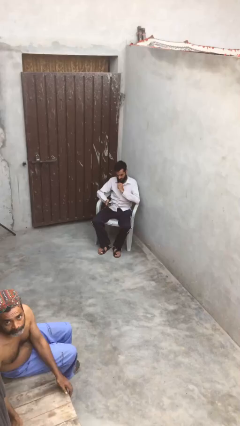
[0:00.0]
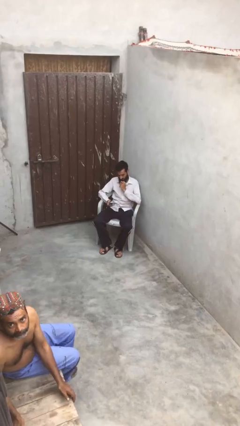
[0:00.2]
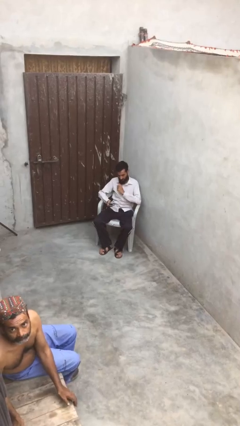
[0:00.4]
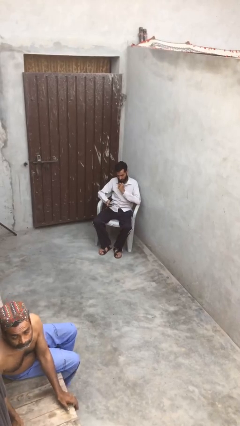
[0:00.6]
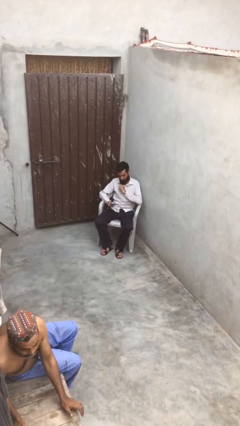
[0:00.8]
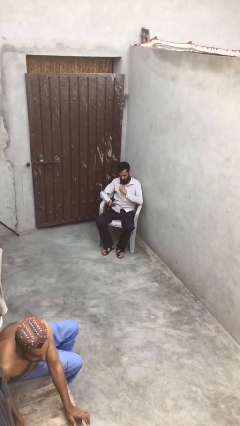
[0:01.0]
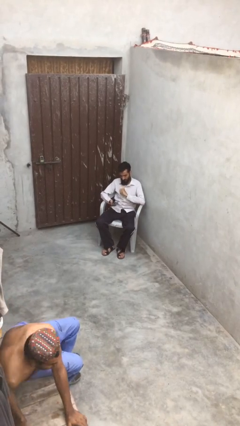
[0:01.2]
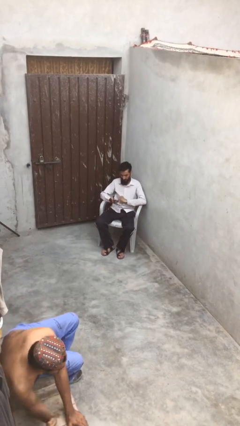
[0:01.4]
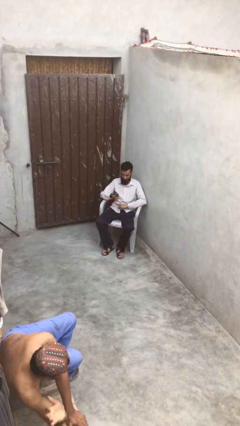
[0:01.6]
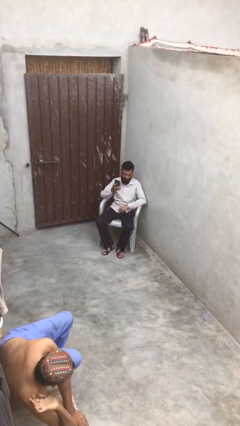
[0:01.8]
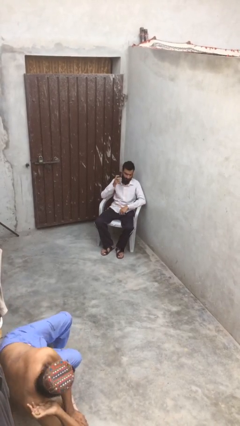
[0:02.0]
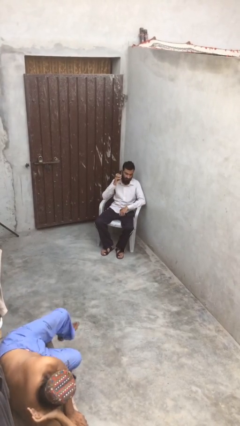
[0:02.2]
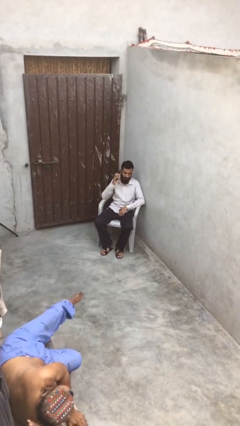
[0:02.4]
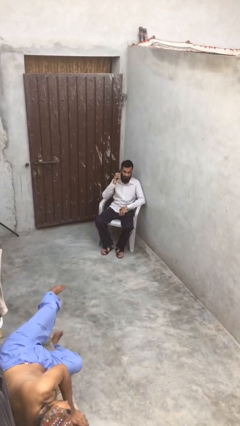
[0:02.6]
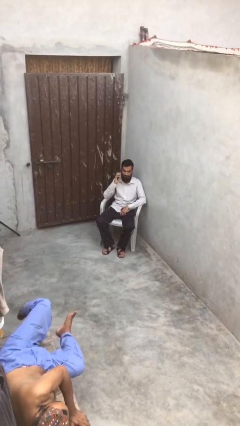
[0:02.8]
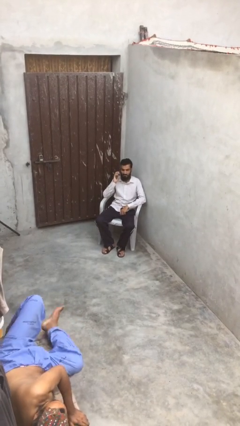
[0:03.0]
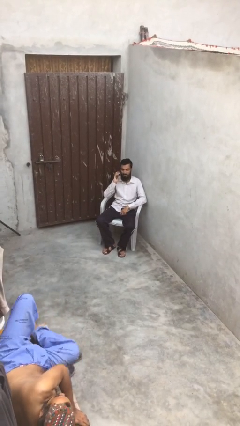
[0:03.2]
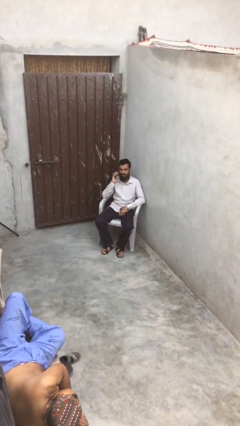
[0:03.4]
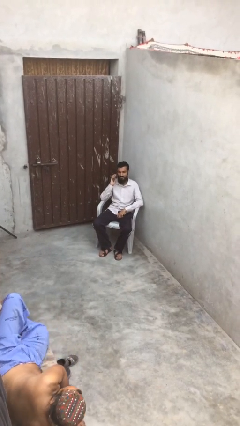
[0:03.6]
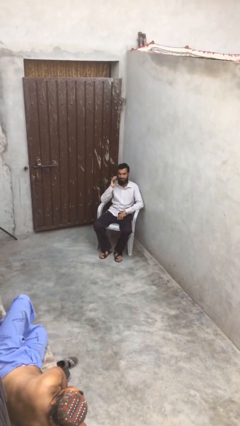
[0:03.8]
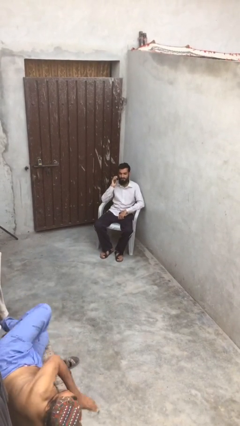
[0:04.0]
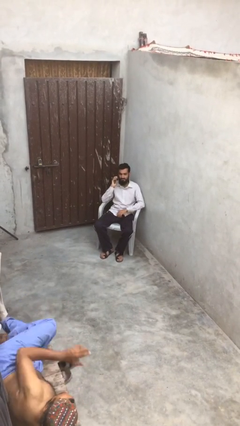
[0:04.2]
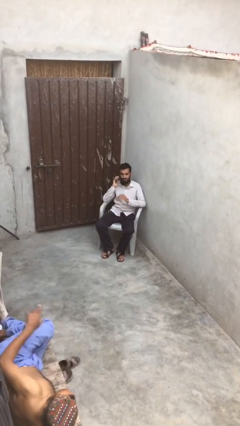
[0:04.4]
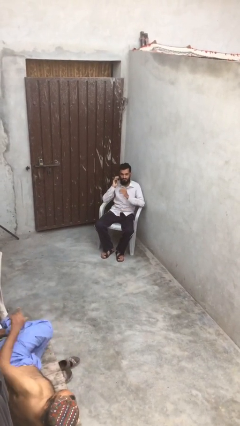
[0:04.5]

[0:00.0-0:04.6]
person talks on phone

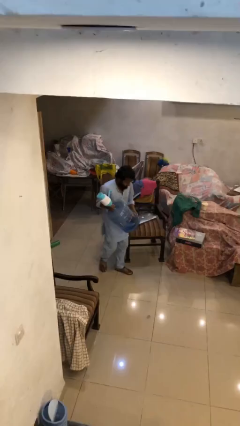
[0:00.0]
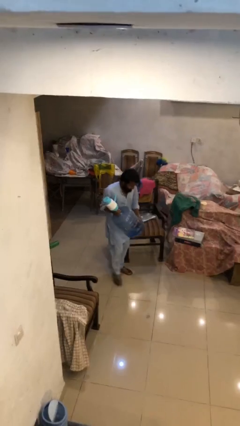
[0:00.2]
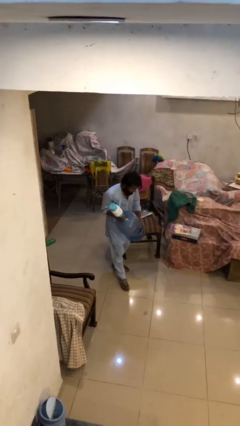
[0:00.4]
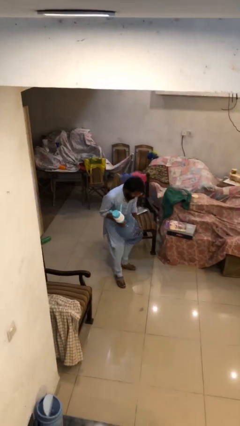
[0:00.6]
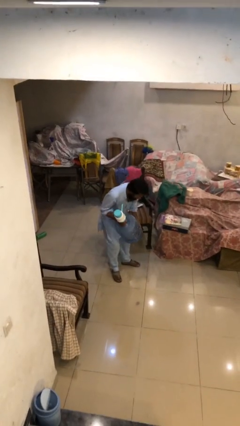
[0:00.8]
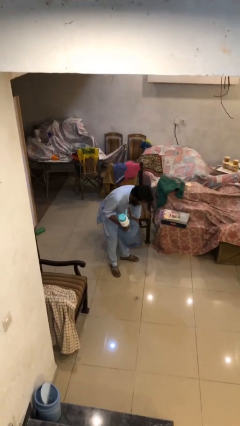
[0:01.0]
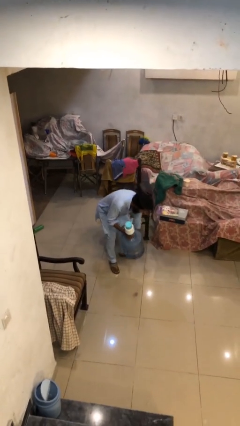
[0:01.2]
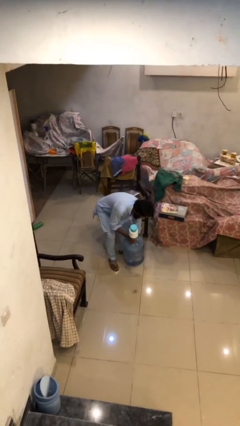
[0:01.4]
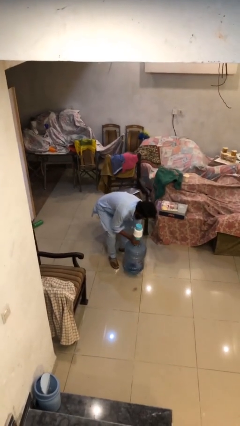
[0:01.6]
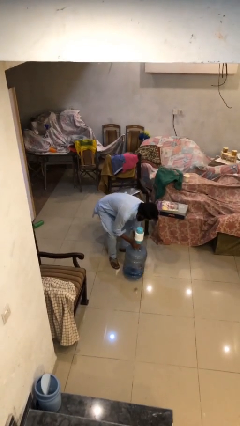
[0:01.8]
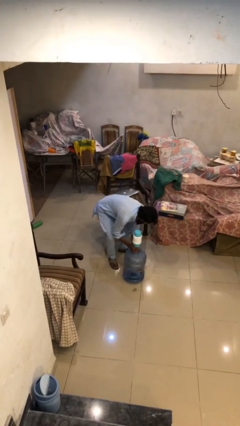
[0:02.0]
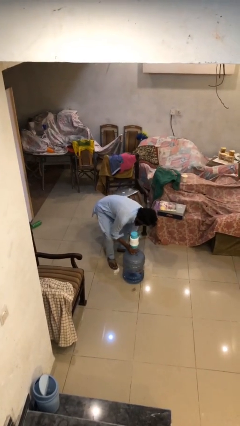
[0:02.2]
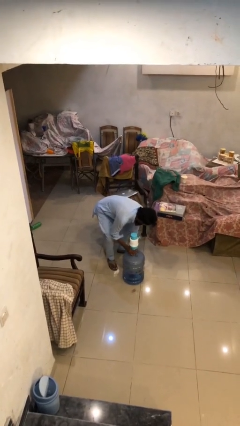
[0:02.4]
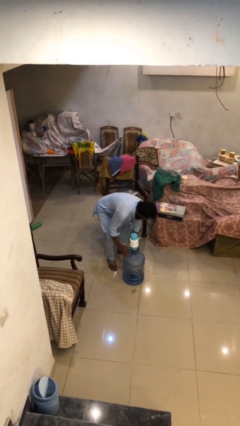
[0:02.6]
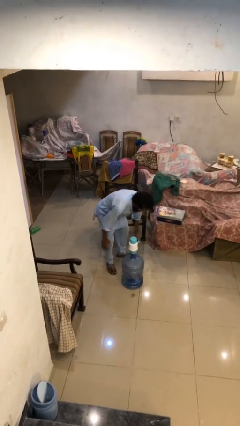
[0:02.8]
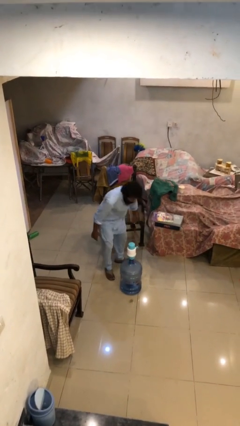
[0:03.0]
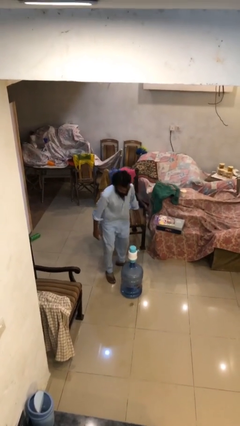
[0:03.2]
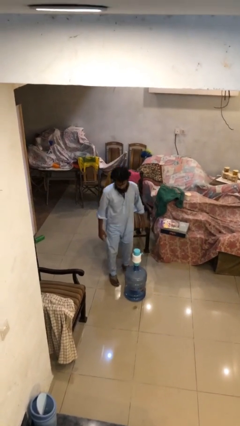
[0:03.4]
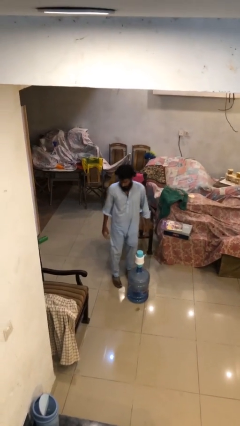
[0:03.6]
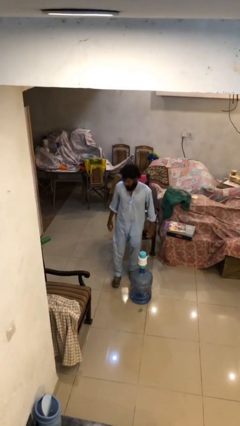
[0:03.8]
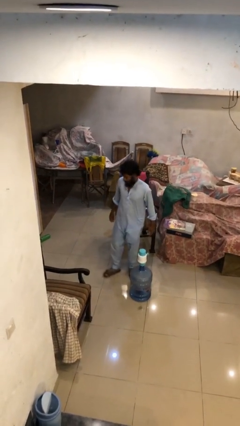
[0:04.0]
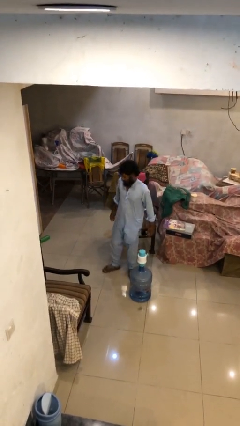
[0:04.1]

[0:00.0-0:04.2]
person puts down object on floor

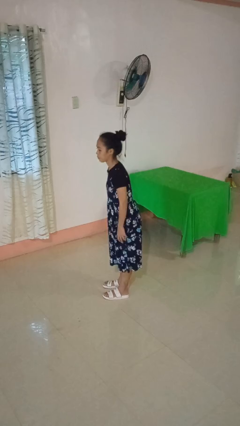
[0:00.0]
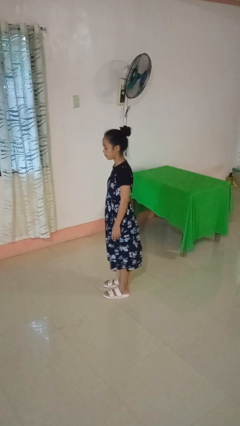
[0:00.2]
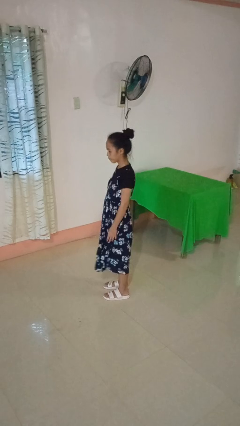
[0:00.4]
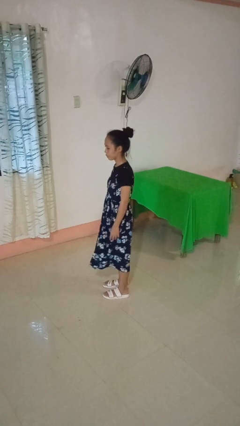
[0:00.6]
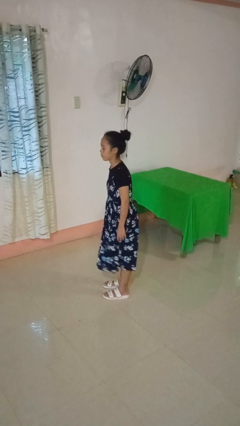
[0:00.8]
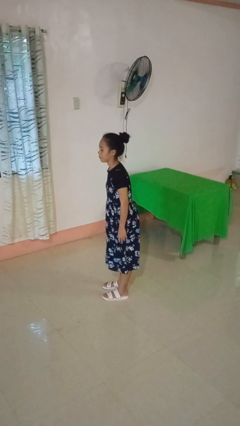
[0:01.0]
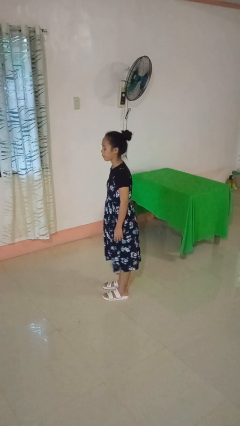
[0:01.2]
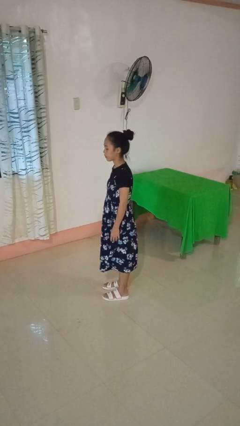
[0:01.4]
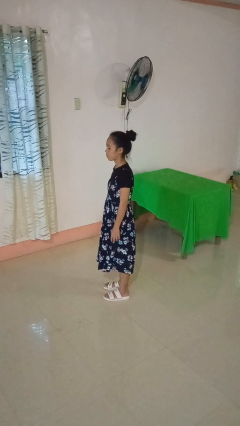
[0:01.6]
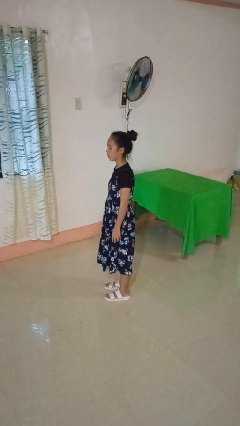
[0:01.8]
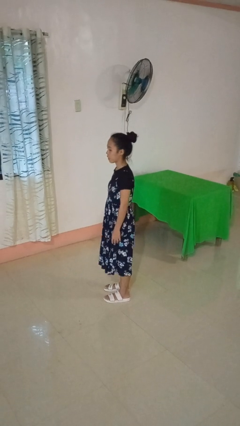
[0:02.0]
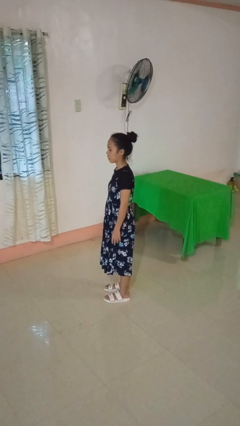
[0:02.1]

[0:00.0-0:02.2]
person wiggles hips

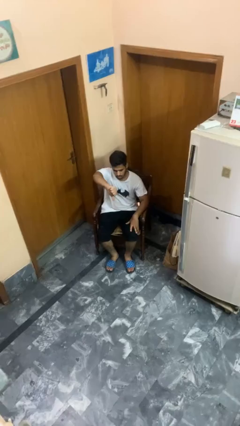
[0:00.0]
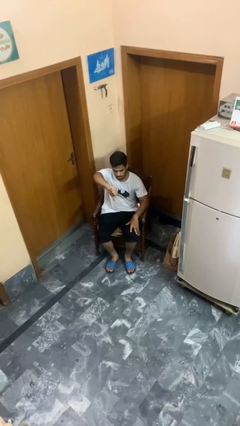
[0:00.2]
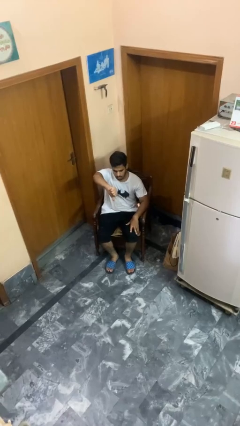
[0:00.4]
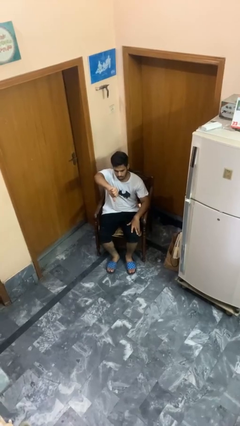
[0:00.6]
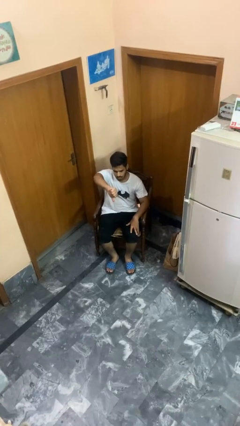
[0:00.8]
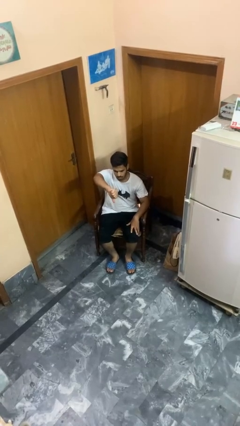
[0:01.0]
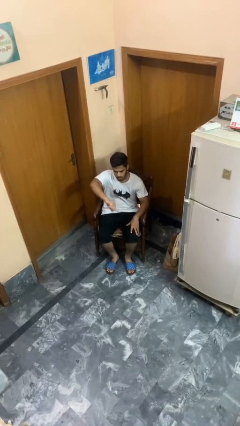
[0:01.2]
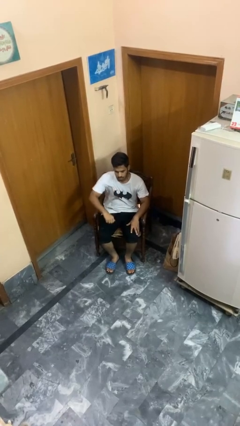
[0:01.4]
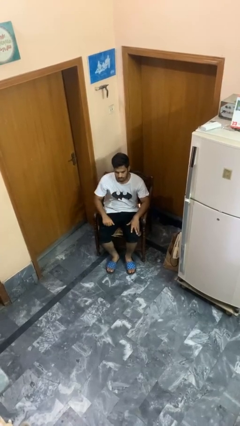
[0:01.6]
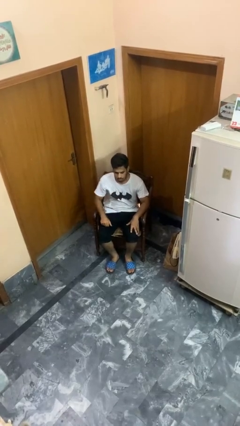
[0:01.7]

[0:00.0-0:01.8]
person gestures thumbs down

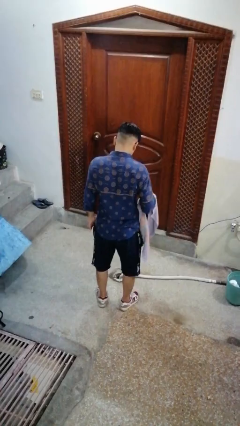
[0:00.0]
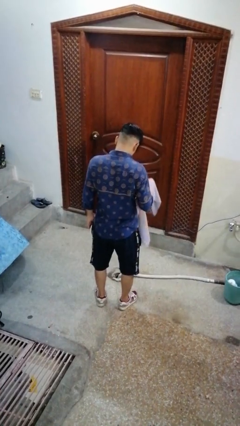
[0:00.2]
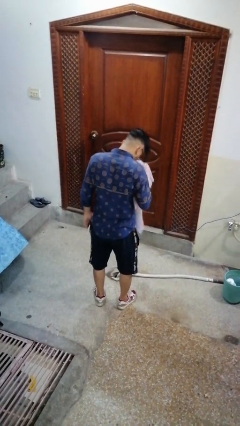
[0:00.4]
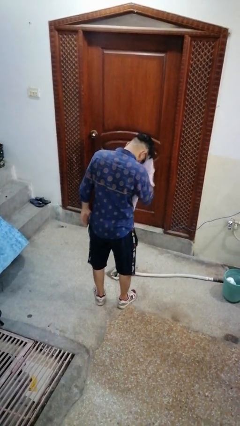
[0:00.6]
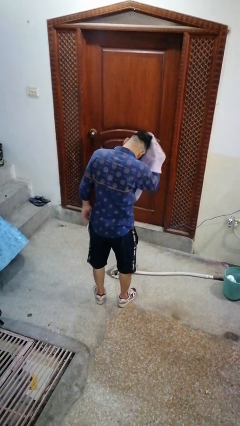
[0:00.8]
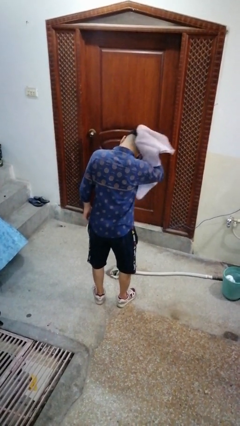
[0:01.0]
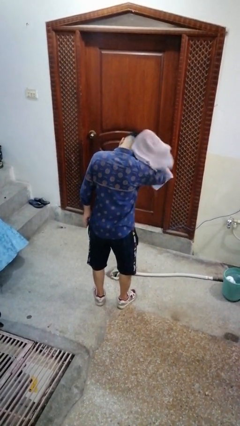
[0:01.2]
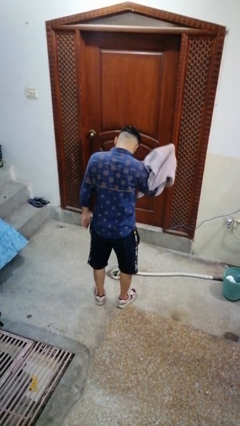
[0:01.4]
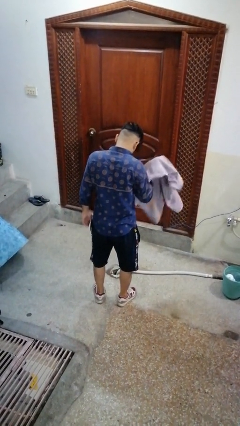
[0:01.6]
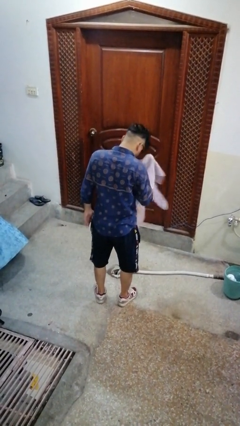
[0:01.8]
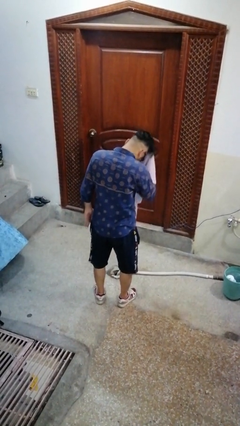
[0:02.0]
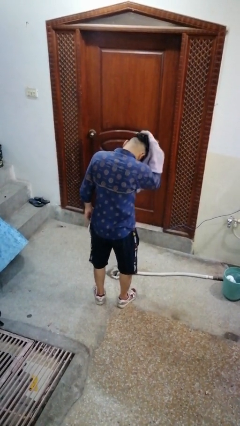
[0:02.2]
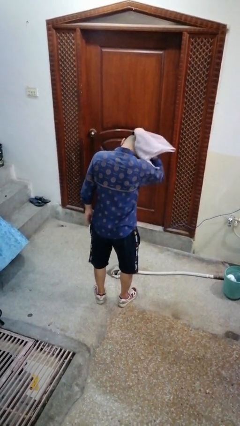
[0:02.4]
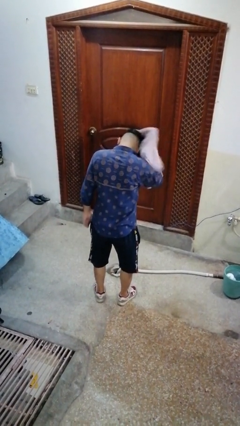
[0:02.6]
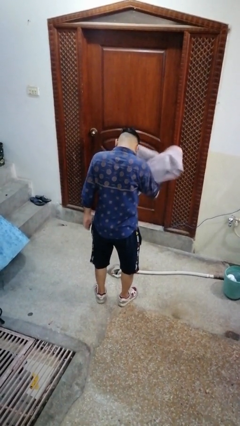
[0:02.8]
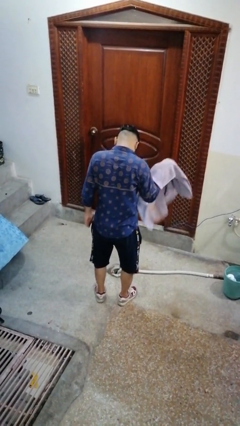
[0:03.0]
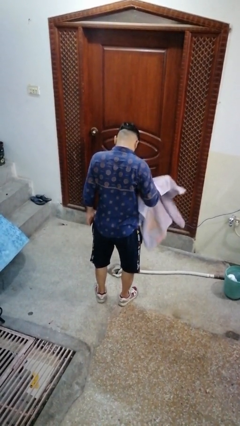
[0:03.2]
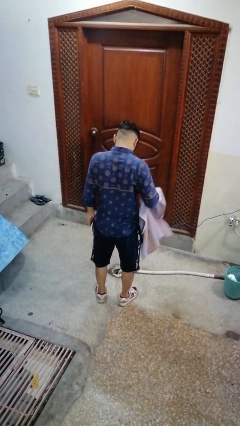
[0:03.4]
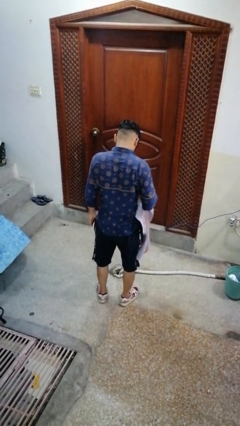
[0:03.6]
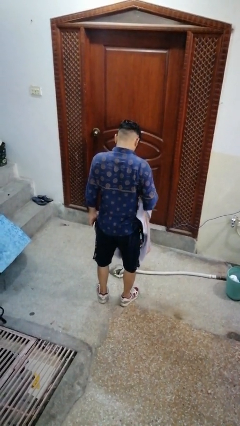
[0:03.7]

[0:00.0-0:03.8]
person dries hair with towel

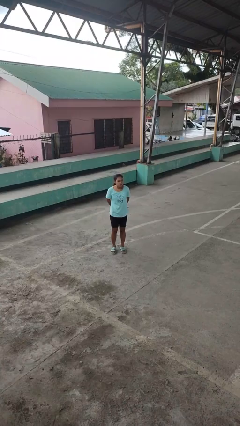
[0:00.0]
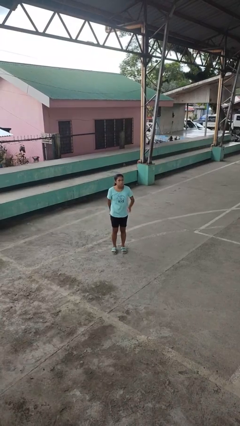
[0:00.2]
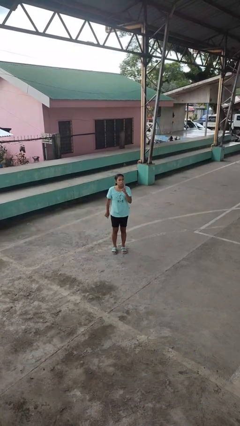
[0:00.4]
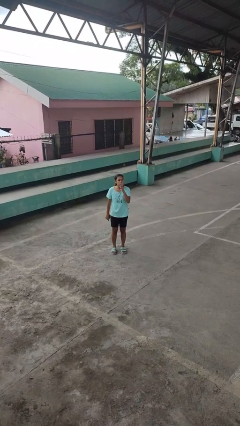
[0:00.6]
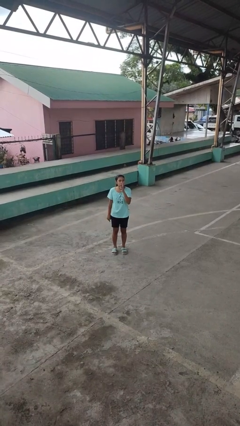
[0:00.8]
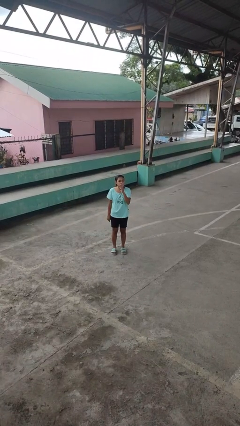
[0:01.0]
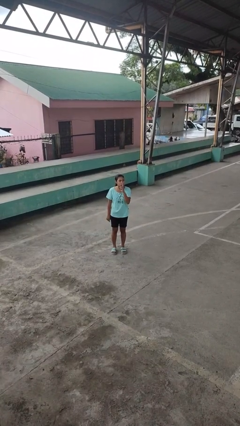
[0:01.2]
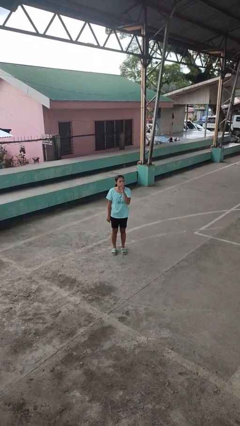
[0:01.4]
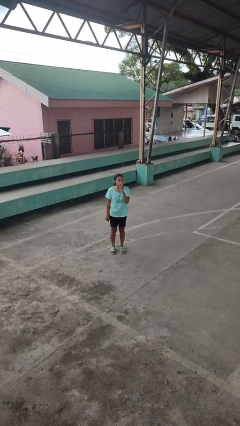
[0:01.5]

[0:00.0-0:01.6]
person gestures be quiet
